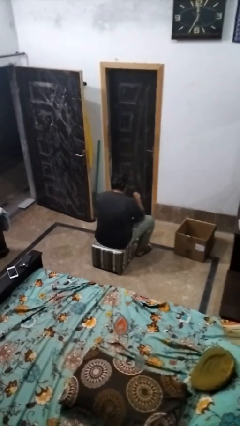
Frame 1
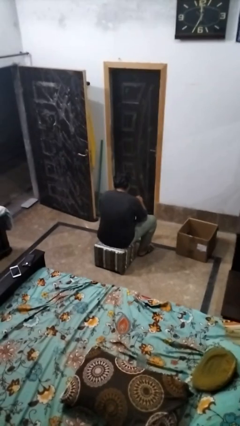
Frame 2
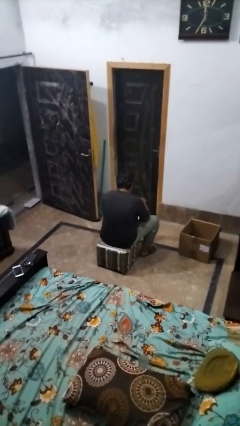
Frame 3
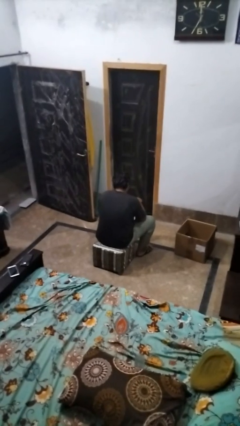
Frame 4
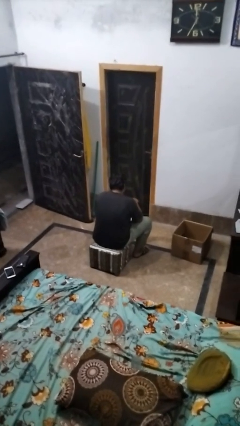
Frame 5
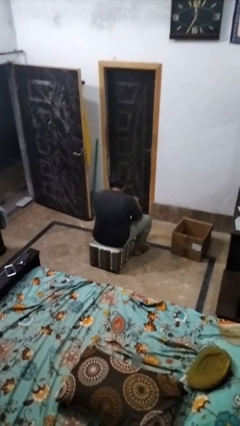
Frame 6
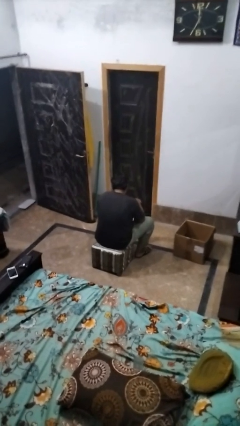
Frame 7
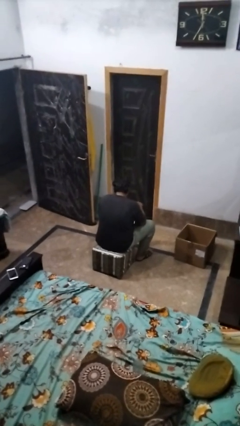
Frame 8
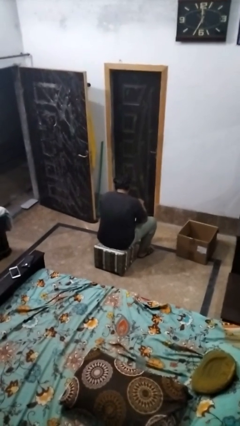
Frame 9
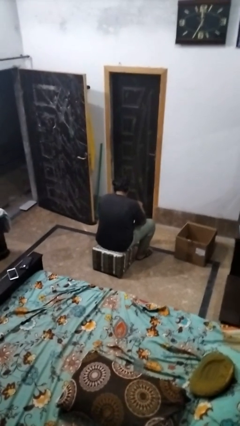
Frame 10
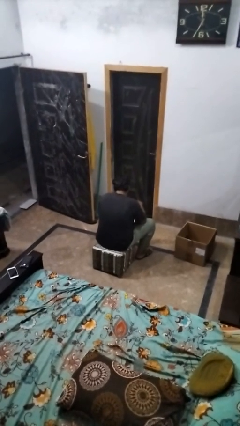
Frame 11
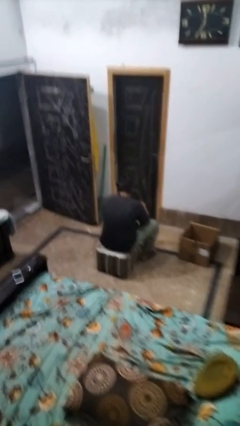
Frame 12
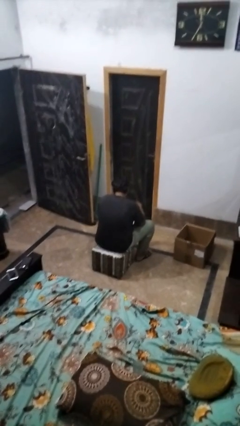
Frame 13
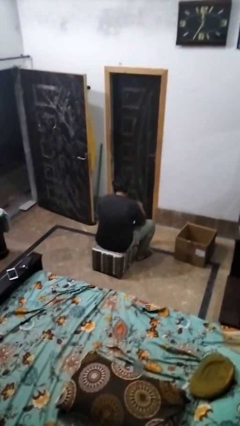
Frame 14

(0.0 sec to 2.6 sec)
person stirs mug

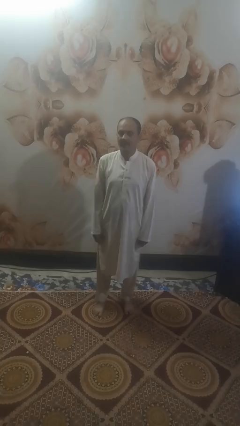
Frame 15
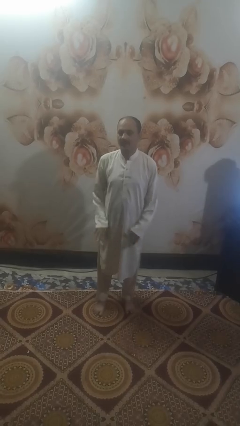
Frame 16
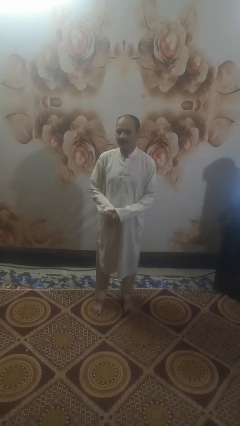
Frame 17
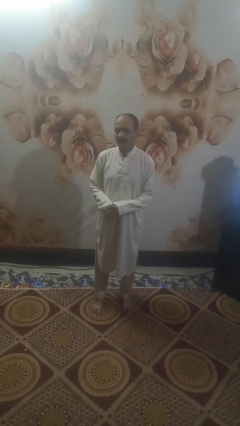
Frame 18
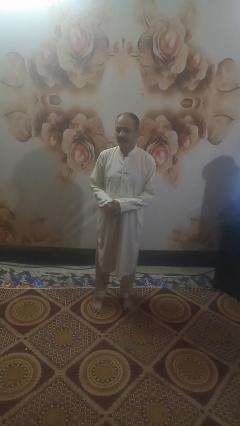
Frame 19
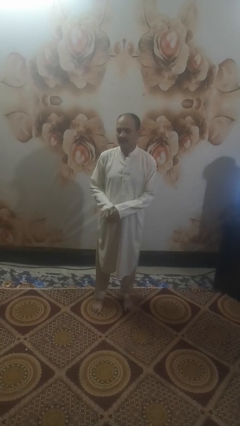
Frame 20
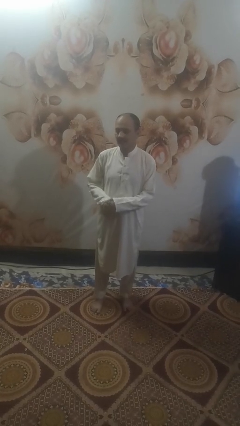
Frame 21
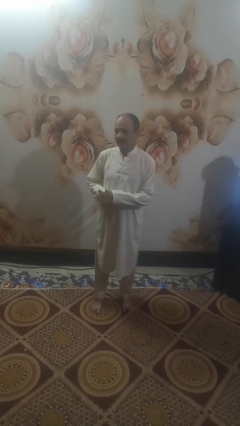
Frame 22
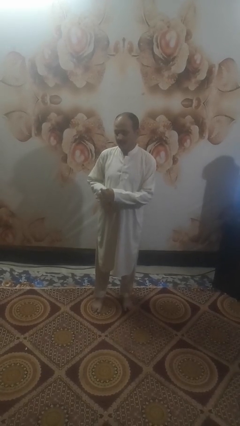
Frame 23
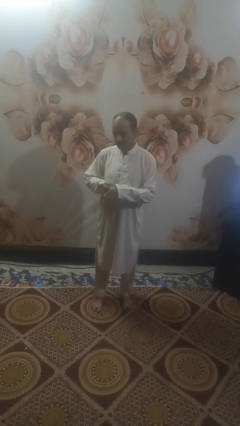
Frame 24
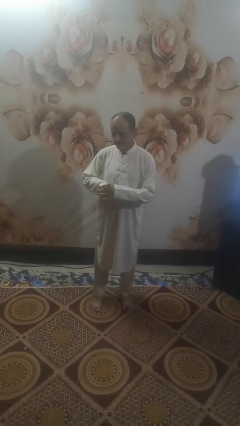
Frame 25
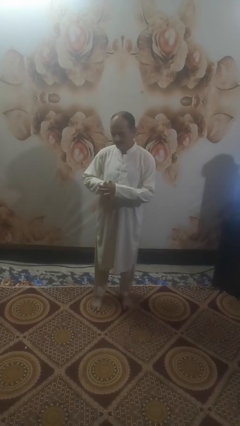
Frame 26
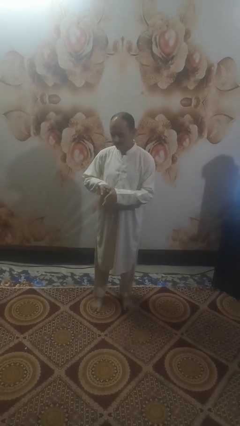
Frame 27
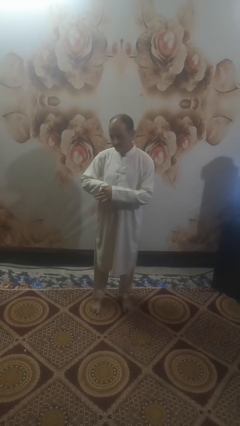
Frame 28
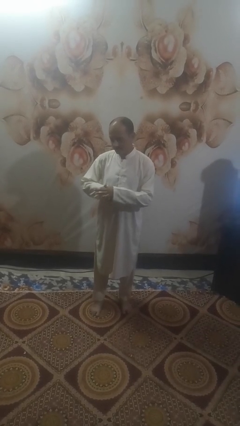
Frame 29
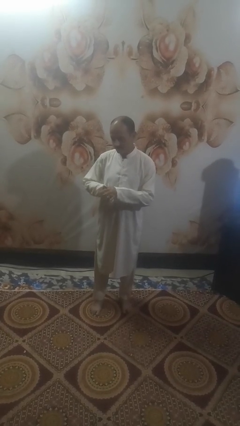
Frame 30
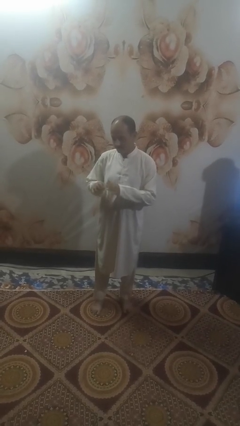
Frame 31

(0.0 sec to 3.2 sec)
person cracks knuckles

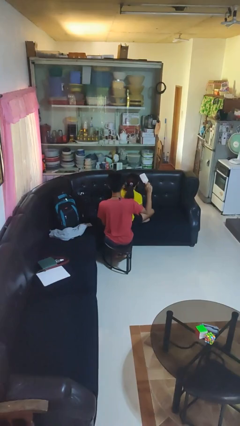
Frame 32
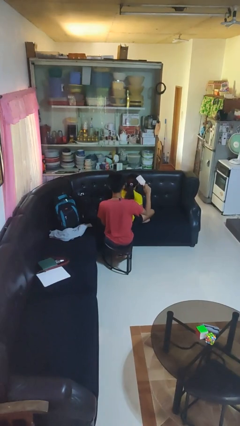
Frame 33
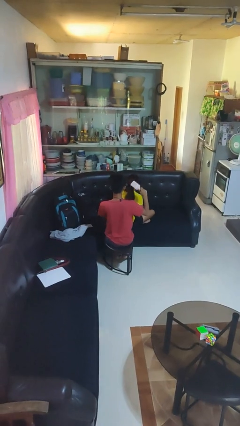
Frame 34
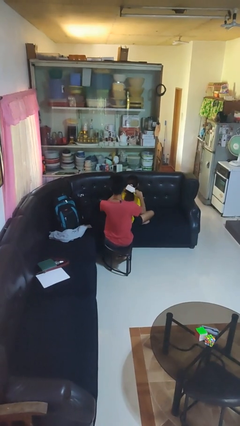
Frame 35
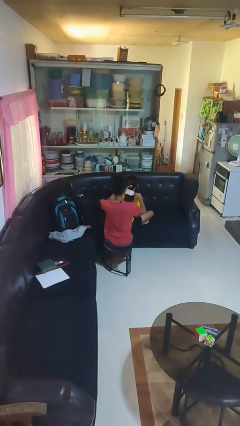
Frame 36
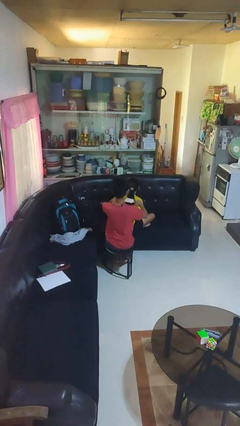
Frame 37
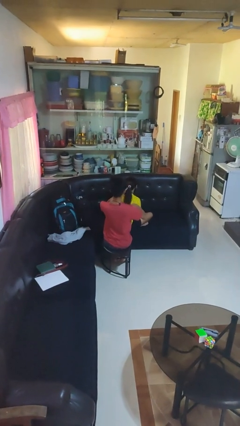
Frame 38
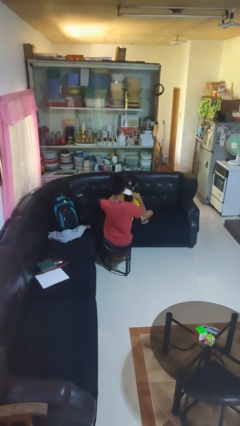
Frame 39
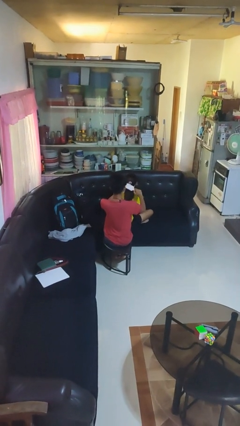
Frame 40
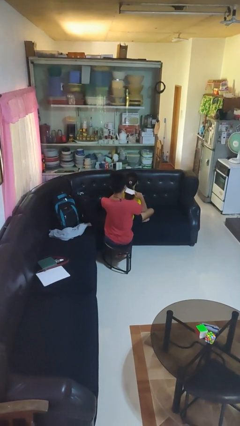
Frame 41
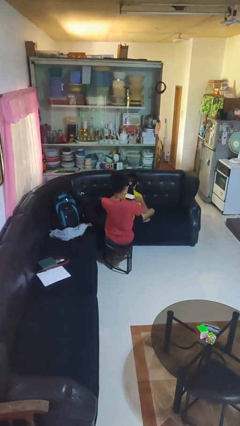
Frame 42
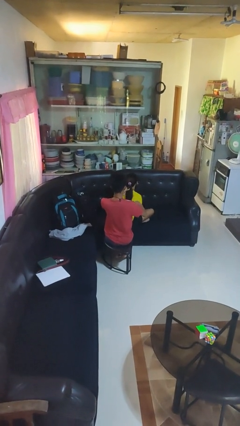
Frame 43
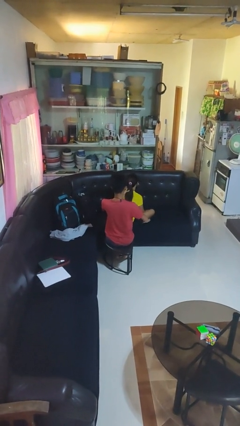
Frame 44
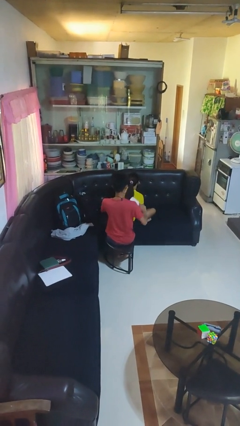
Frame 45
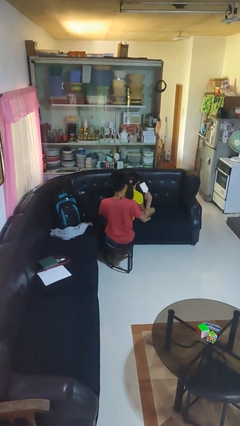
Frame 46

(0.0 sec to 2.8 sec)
person brushes hair of person

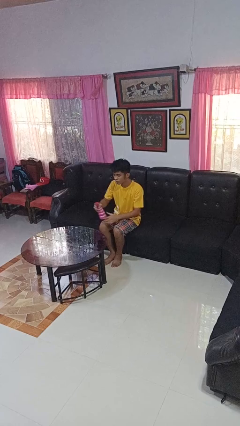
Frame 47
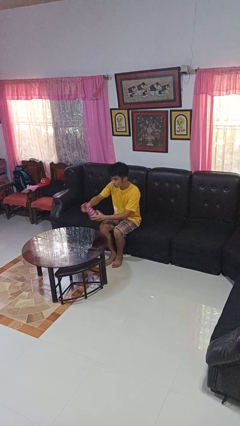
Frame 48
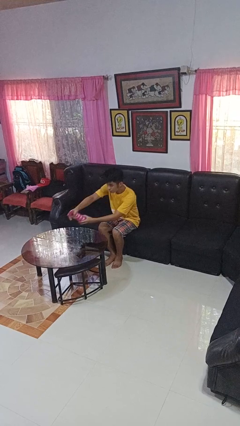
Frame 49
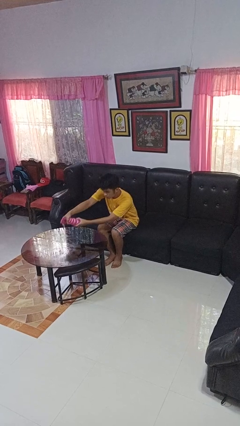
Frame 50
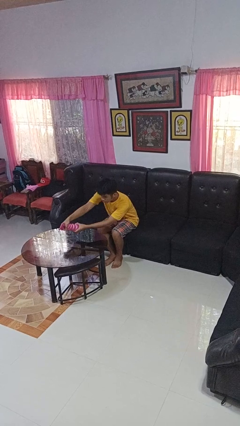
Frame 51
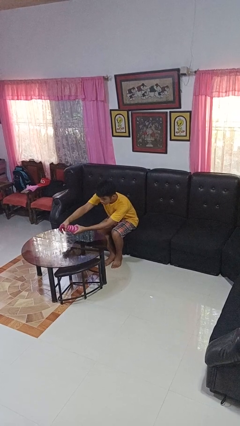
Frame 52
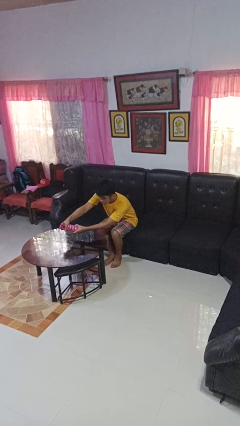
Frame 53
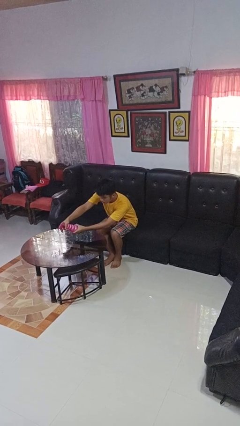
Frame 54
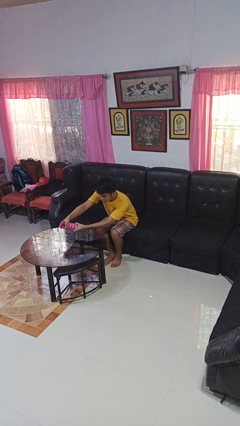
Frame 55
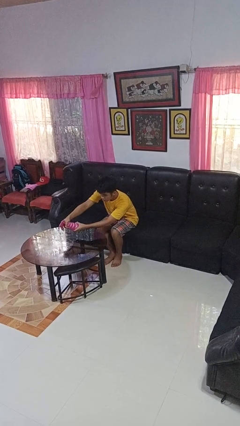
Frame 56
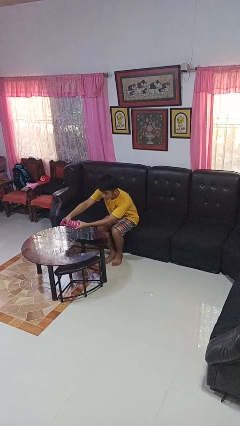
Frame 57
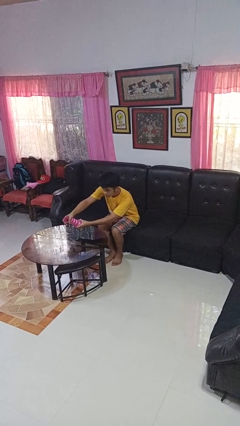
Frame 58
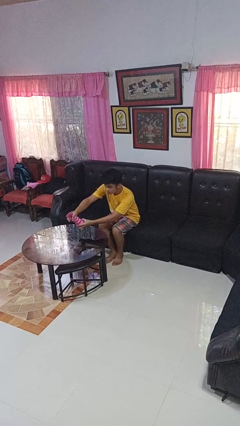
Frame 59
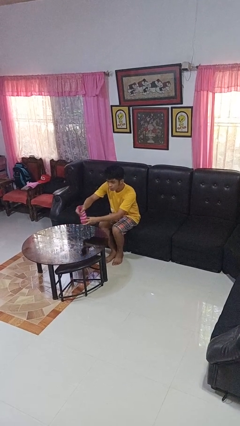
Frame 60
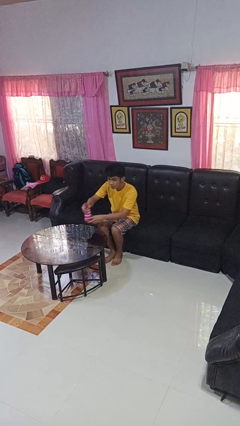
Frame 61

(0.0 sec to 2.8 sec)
person sprays from bottle

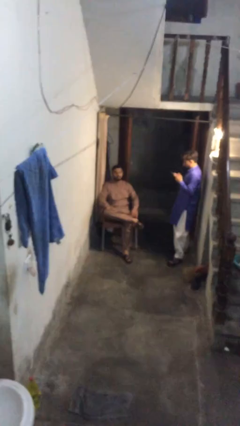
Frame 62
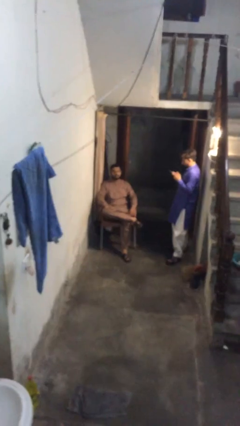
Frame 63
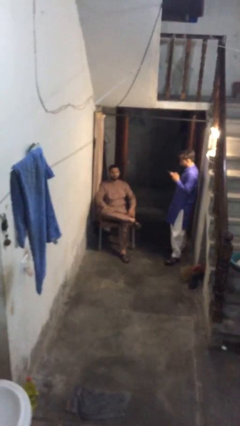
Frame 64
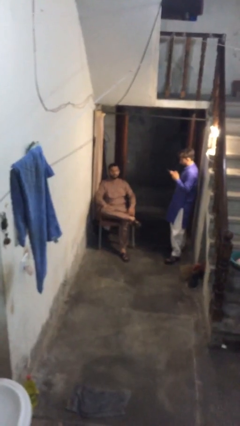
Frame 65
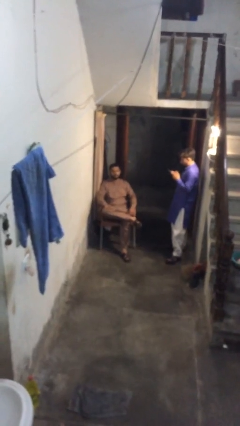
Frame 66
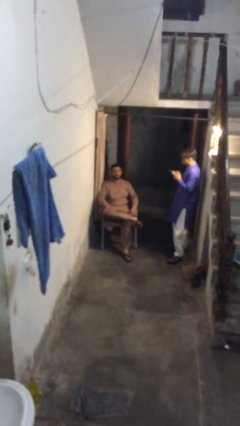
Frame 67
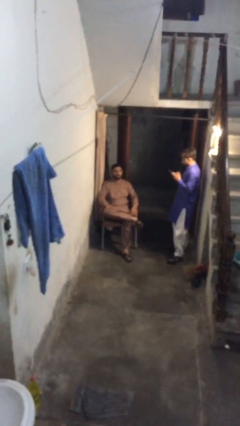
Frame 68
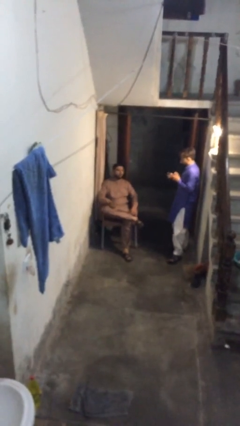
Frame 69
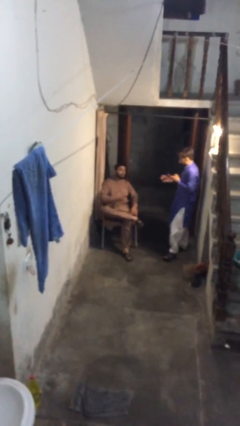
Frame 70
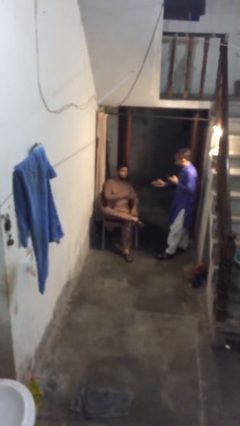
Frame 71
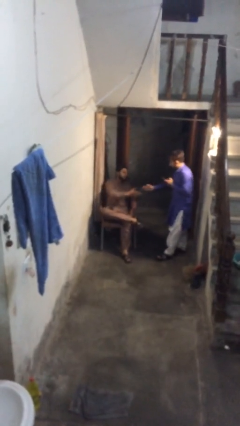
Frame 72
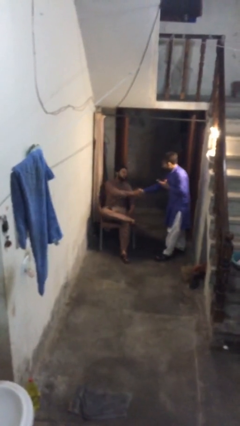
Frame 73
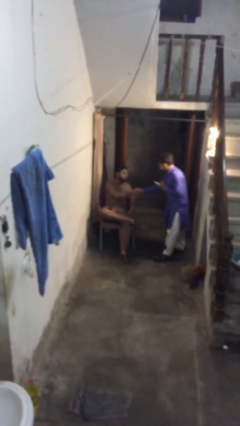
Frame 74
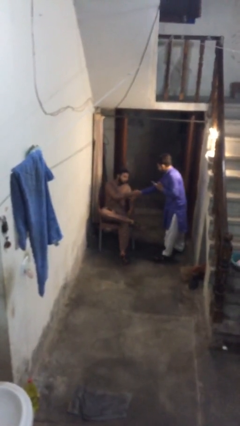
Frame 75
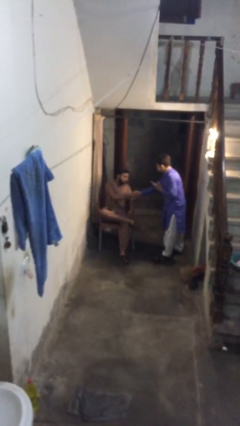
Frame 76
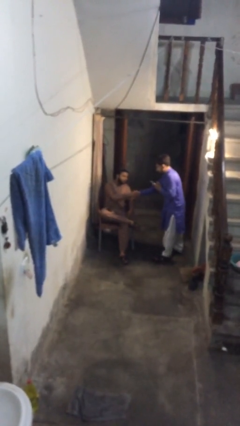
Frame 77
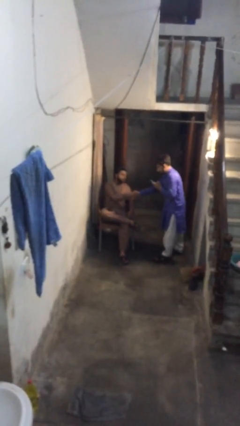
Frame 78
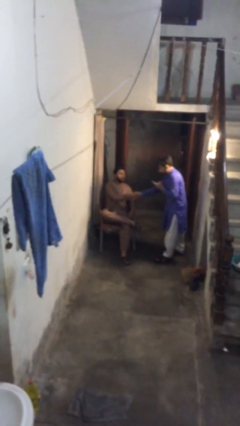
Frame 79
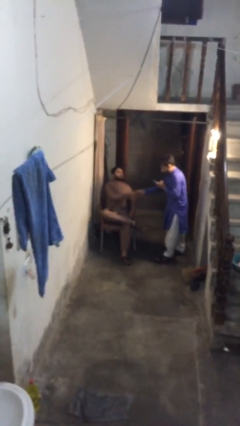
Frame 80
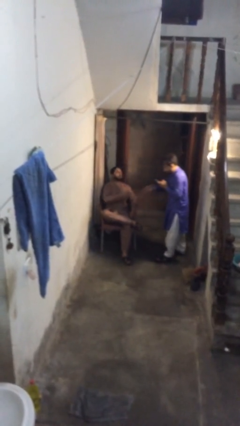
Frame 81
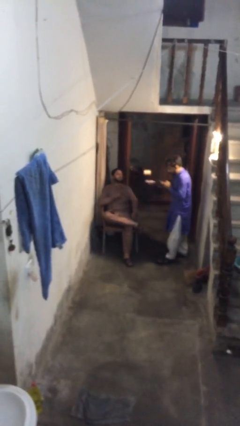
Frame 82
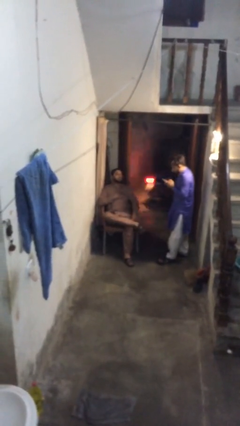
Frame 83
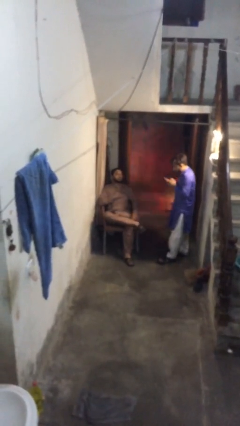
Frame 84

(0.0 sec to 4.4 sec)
person shakes hand

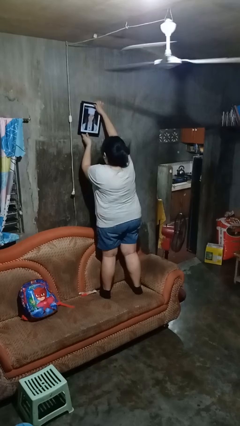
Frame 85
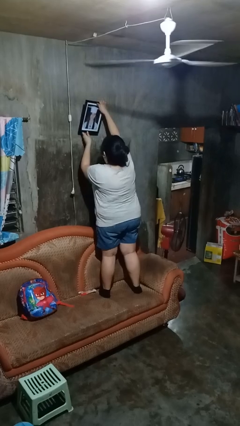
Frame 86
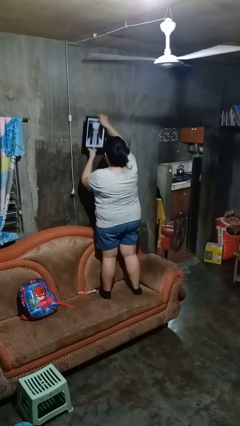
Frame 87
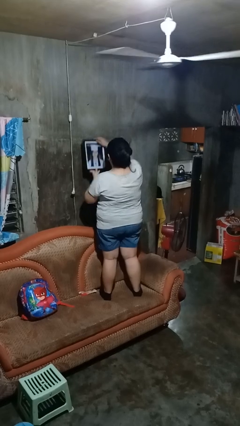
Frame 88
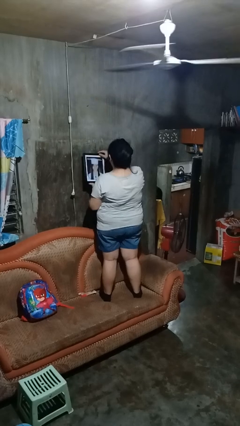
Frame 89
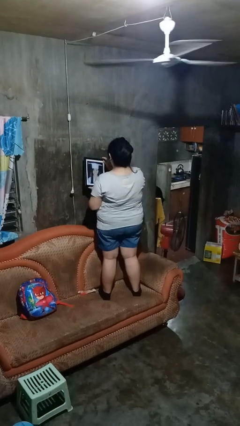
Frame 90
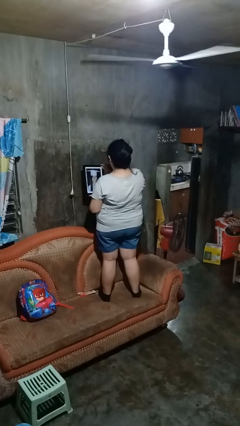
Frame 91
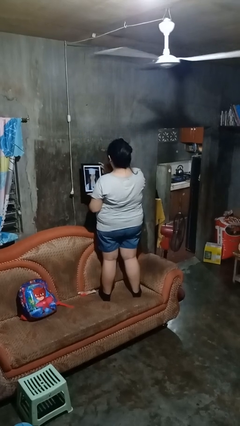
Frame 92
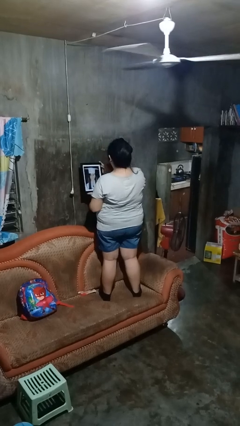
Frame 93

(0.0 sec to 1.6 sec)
person takes down picture frame
